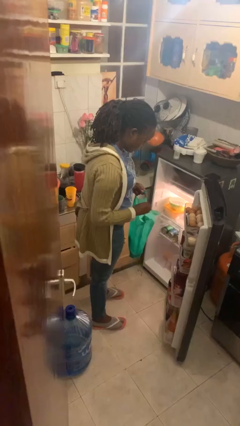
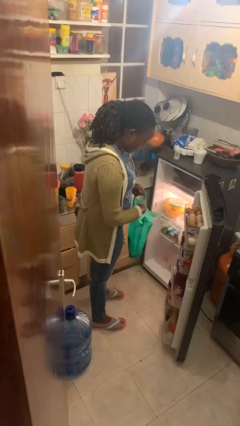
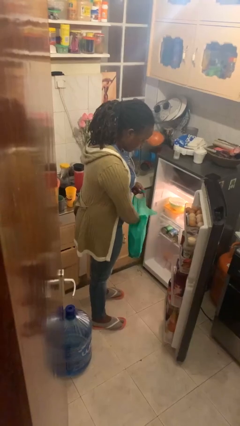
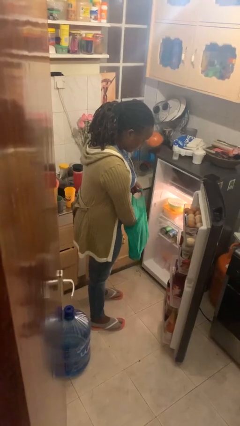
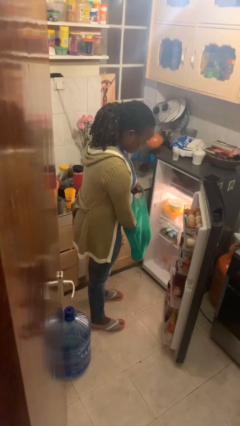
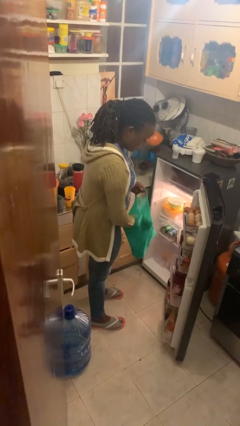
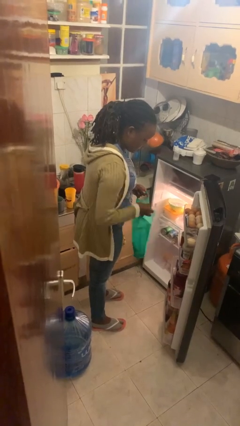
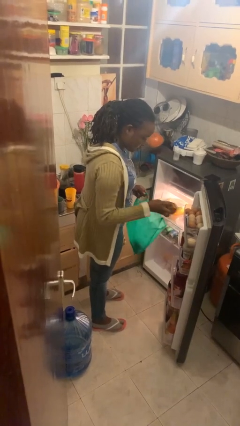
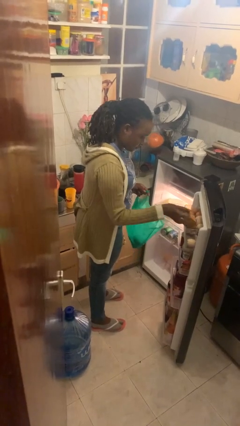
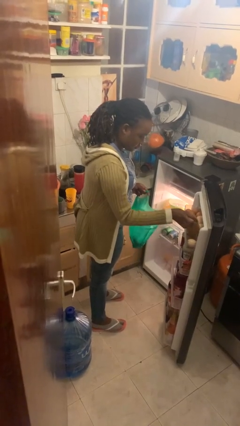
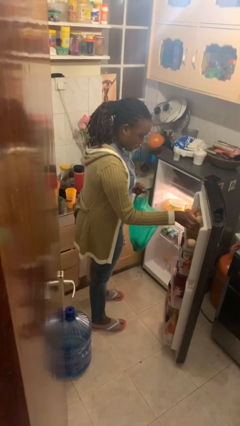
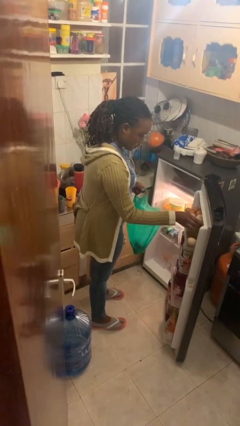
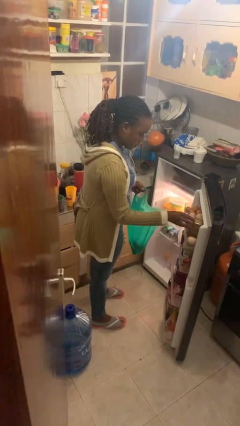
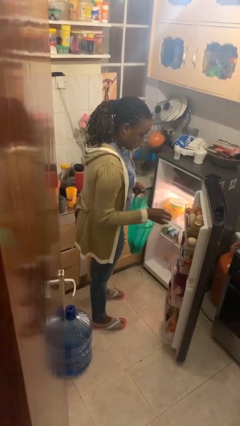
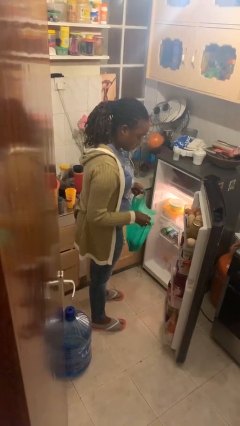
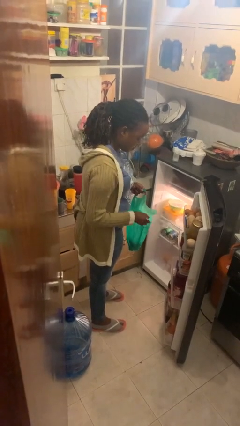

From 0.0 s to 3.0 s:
person loads groceries into refrigerator

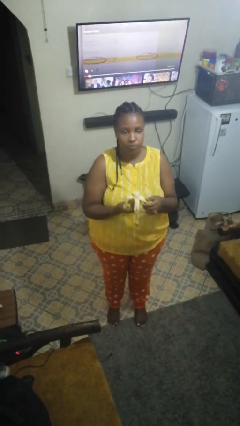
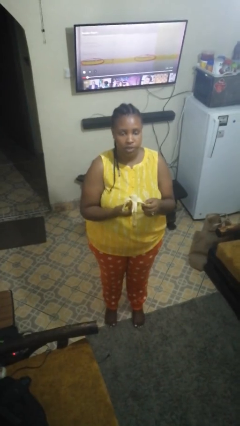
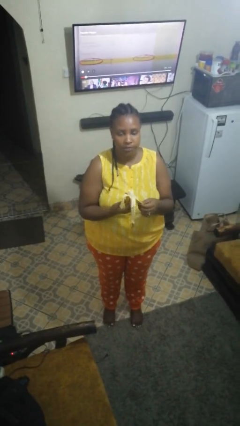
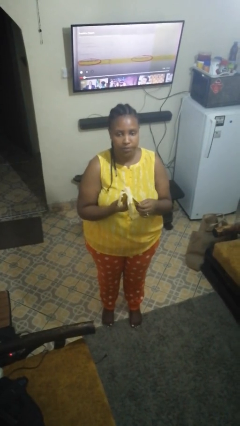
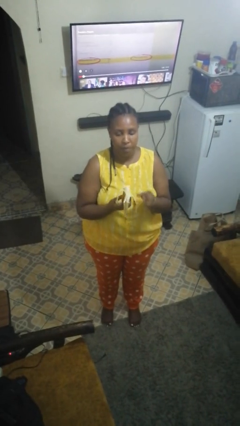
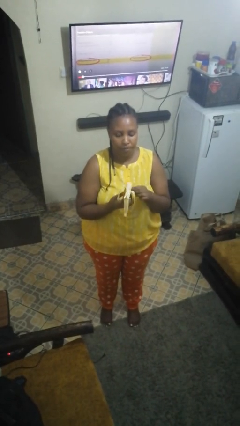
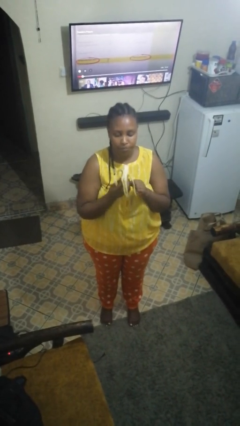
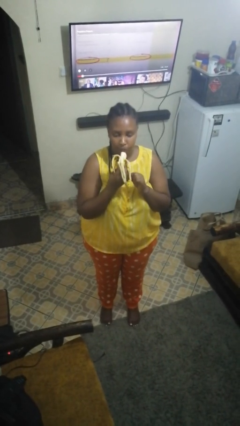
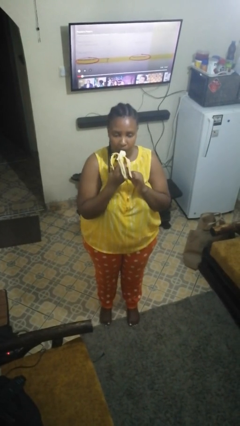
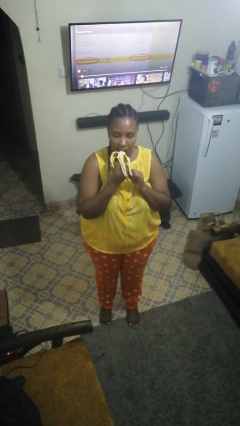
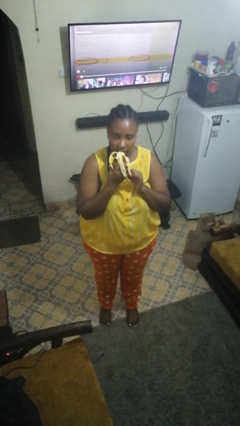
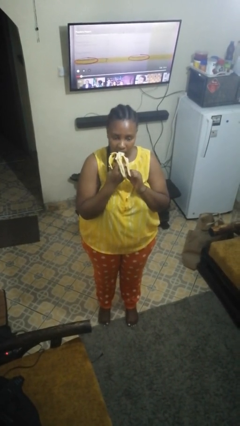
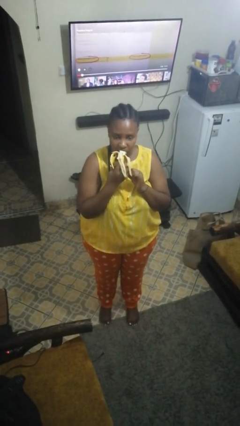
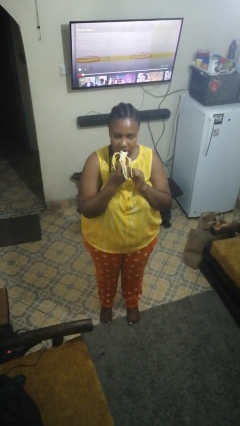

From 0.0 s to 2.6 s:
person eats banana

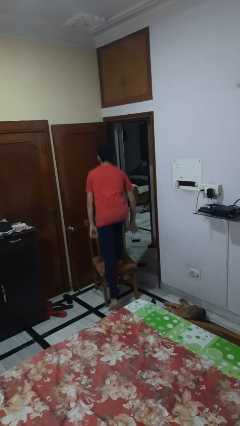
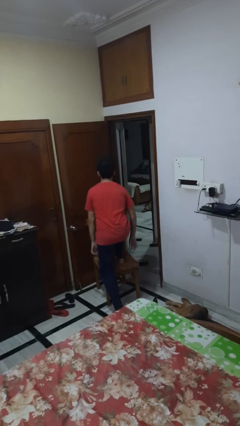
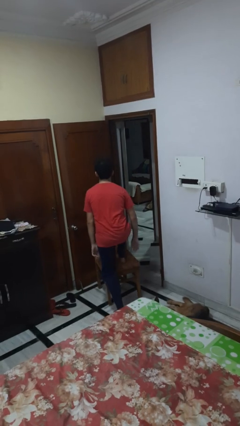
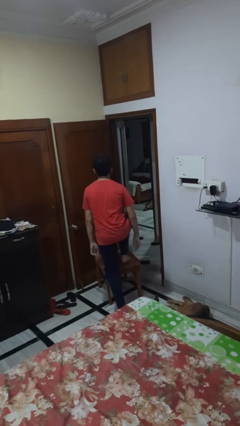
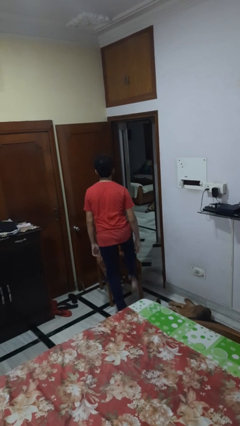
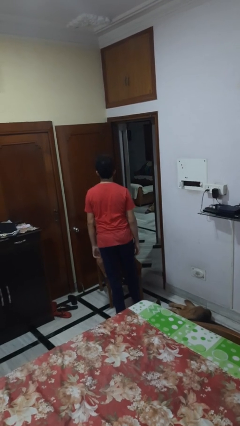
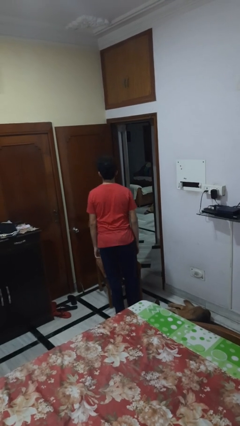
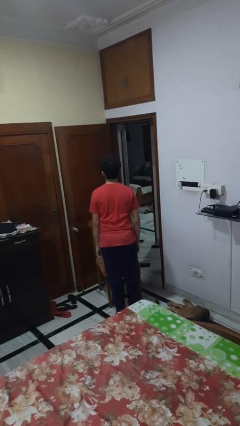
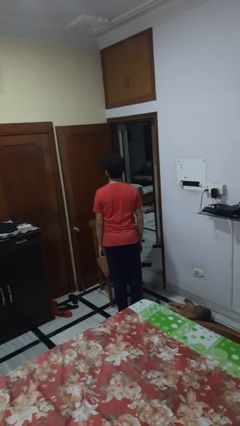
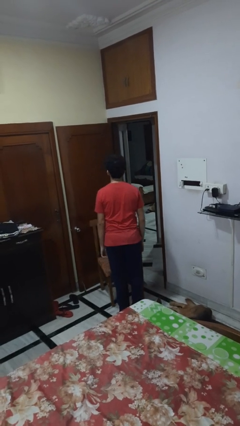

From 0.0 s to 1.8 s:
person climbs off chair

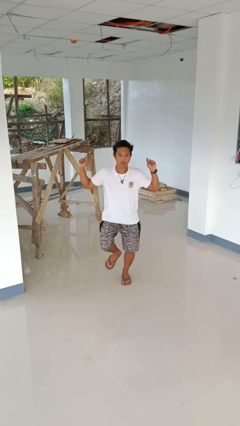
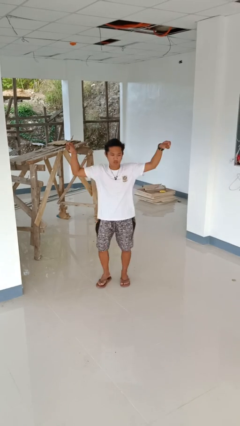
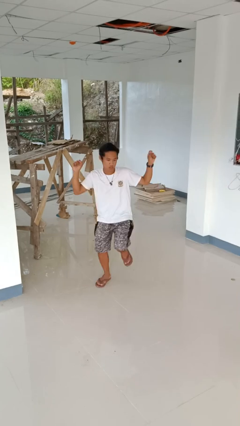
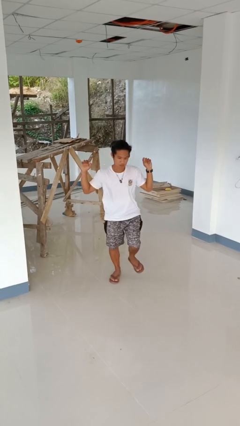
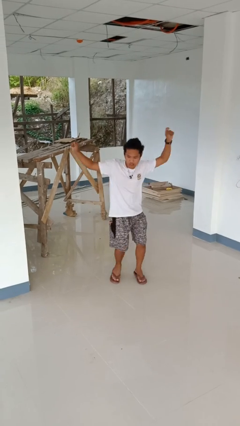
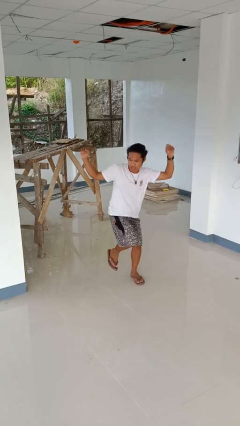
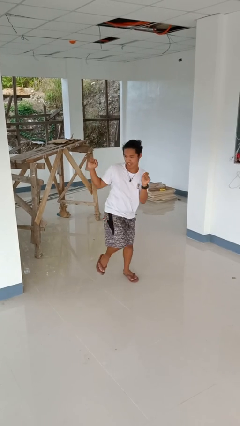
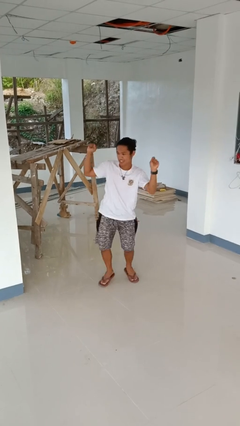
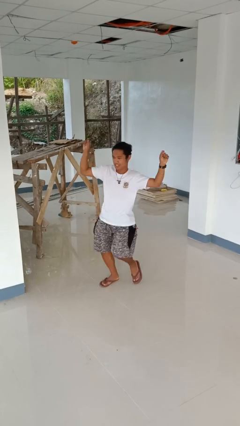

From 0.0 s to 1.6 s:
person dances in place

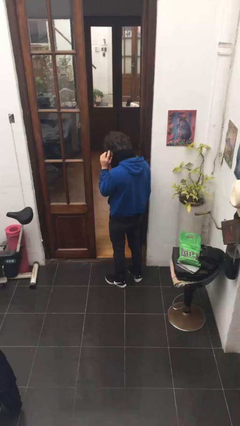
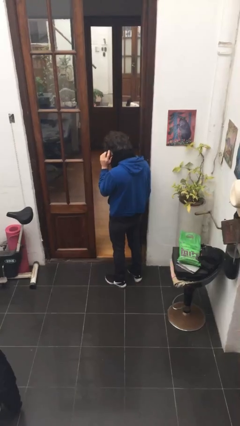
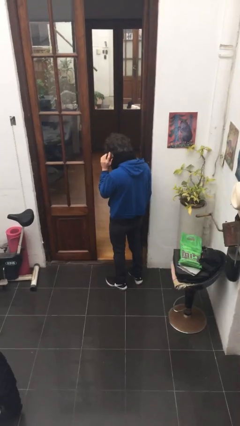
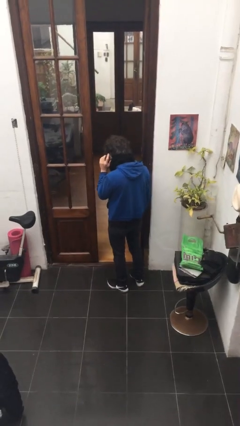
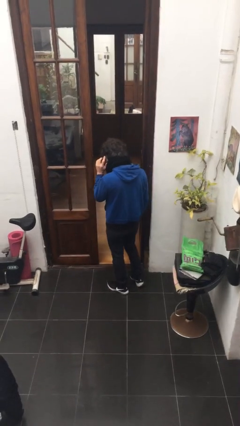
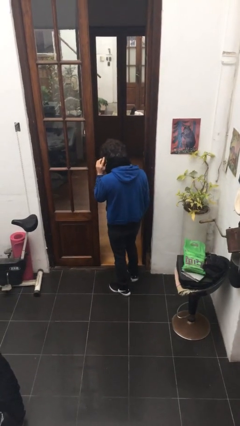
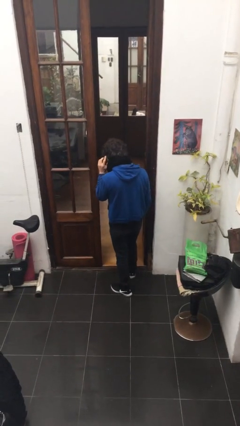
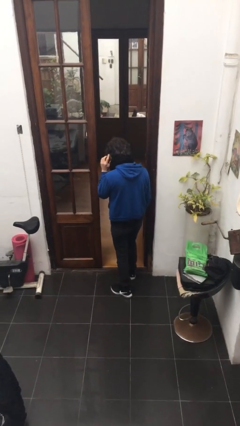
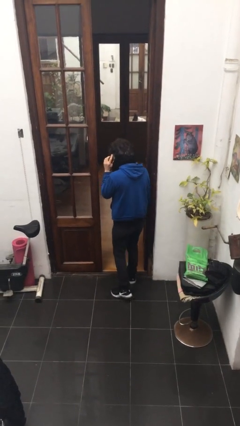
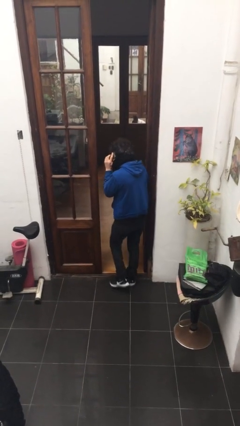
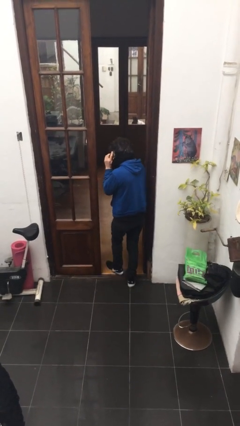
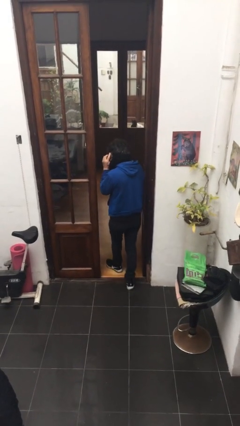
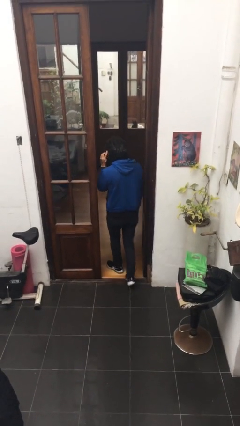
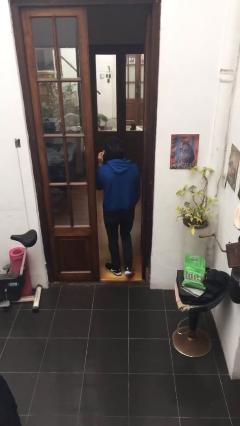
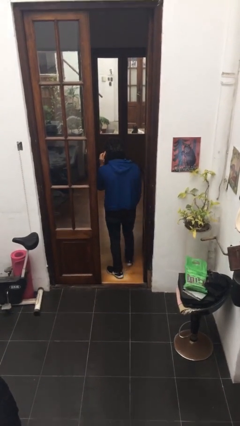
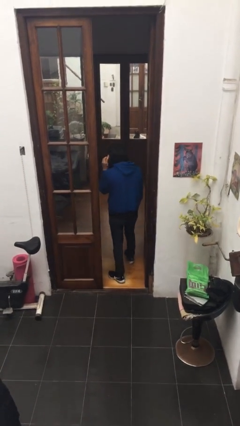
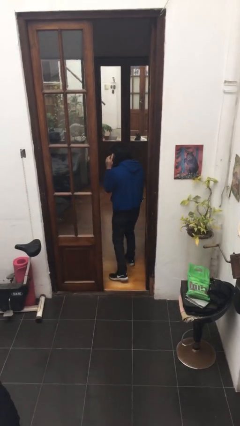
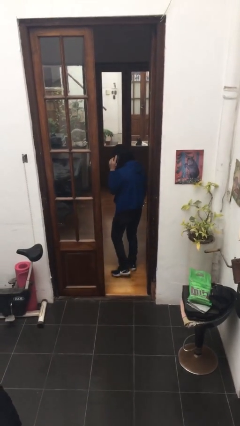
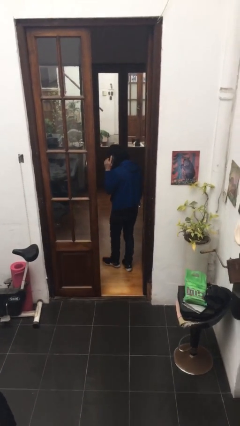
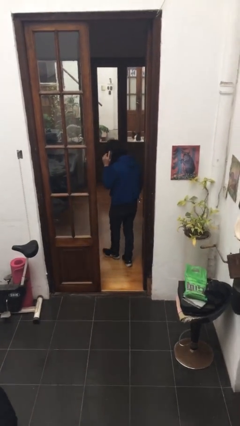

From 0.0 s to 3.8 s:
person exits scene through structure

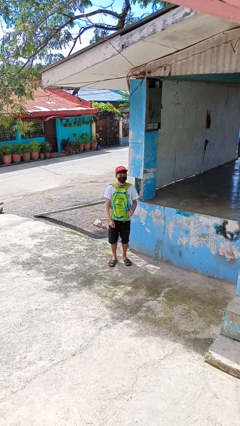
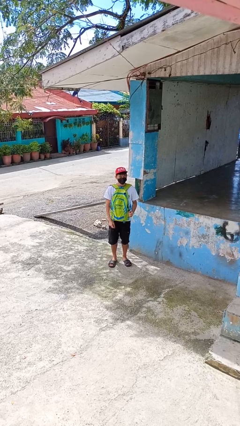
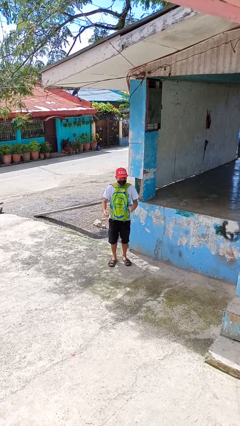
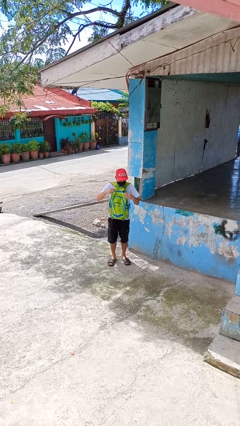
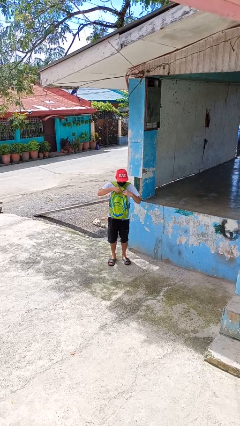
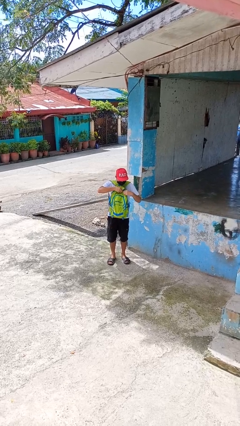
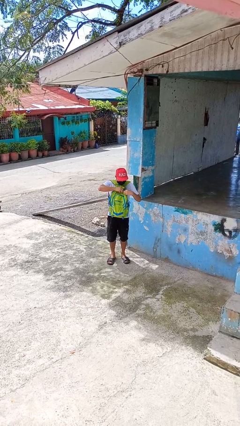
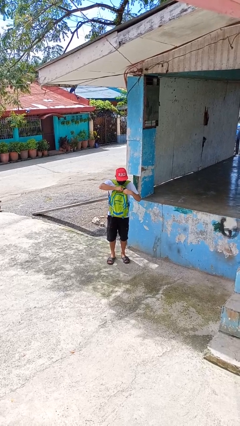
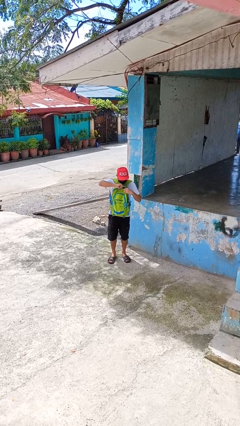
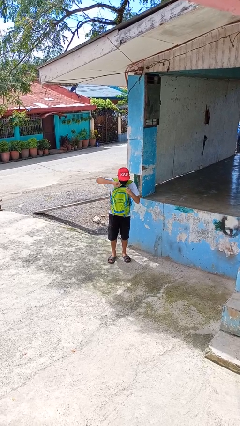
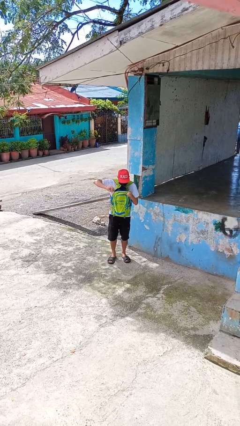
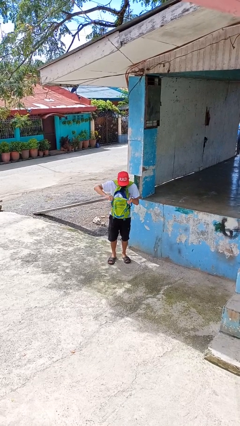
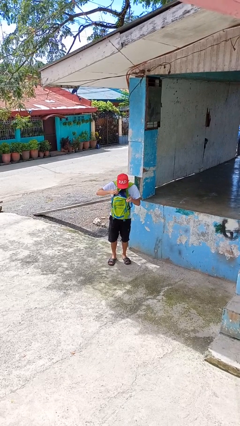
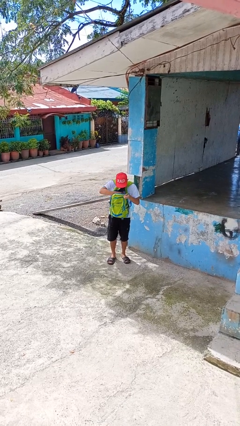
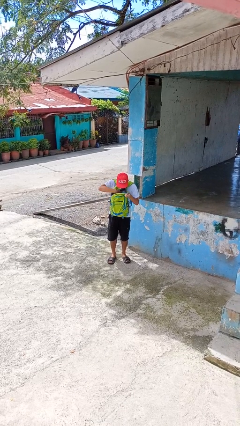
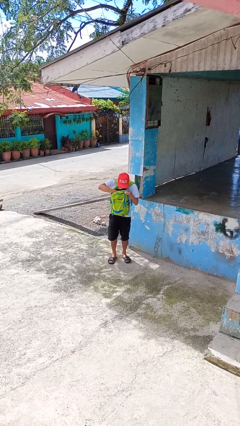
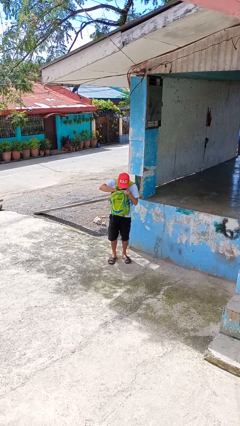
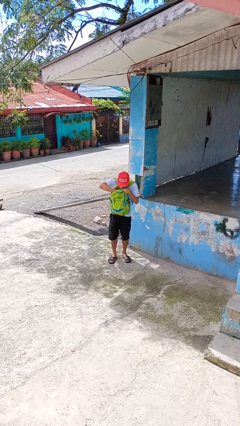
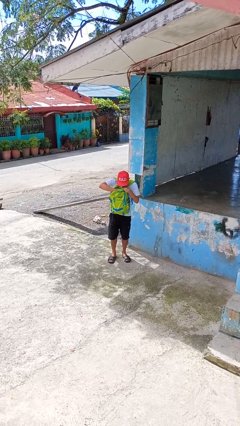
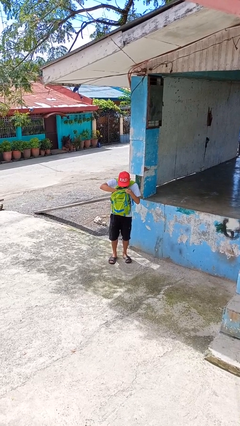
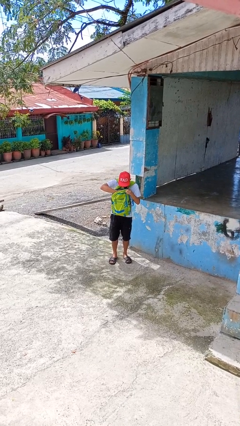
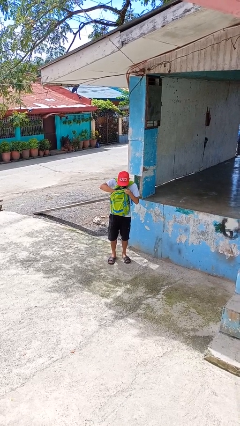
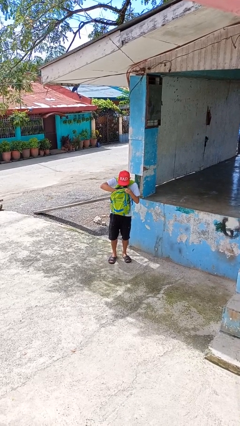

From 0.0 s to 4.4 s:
person searches in backpack

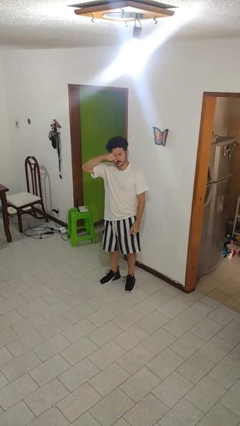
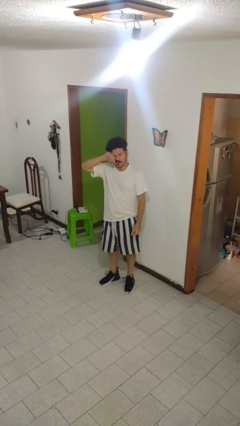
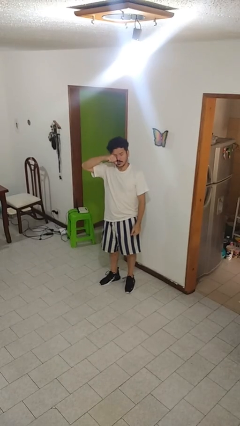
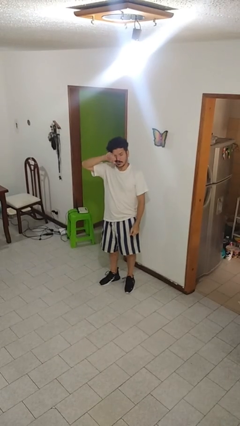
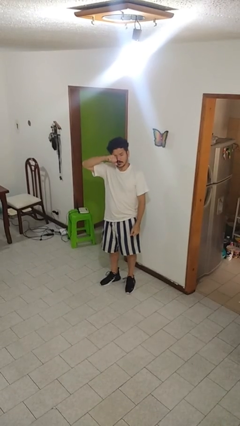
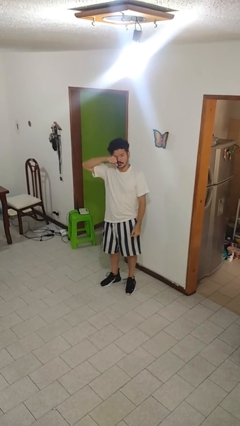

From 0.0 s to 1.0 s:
person rubs eyes
